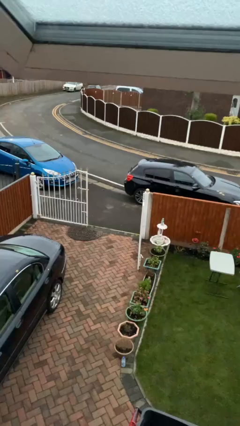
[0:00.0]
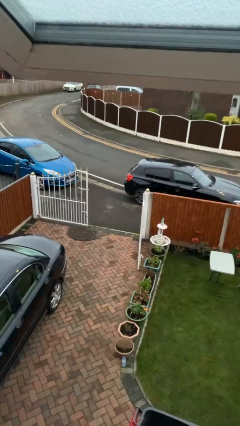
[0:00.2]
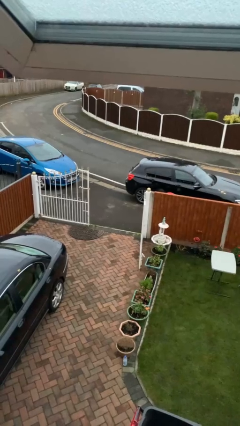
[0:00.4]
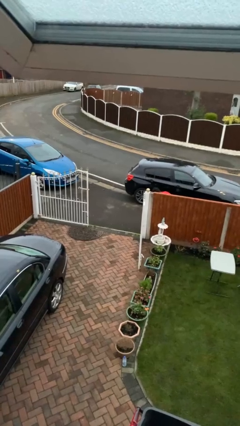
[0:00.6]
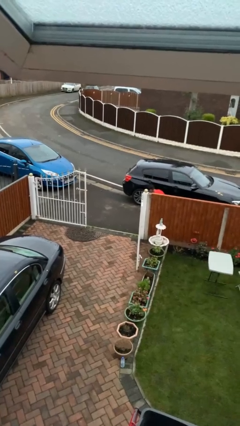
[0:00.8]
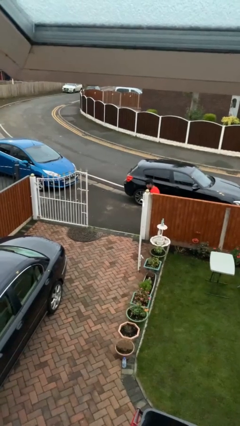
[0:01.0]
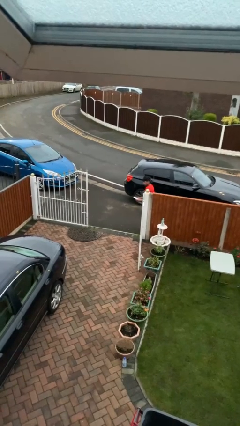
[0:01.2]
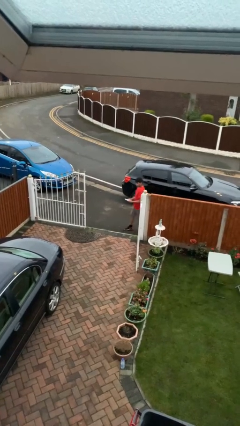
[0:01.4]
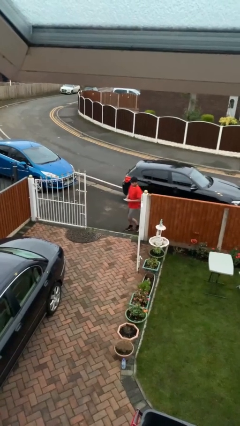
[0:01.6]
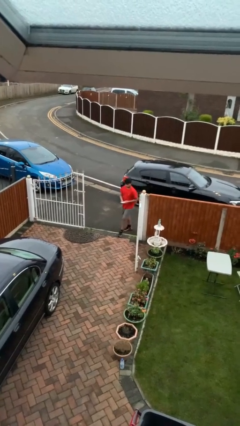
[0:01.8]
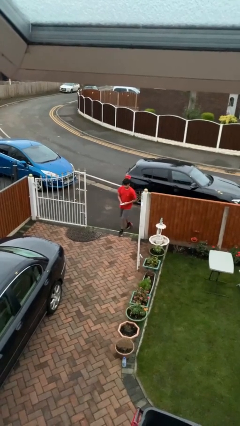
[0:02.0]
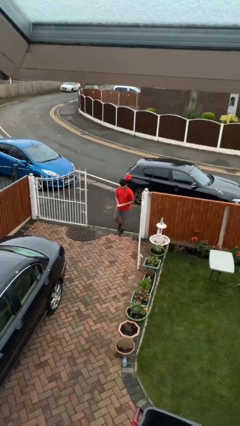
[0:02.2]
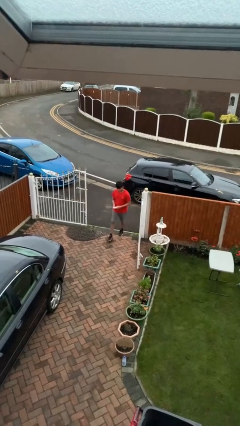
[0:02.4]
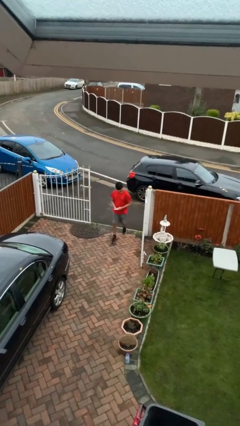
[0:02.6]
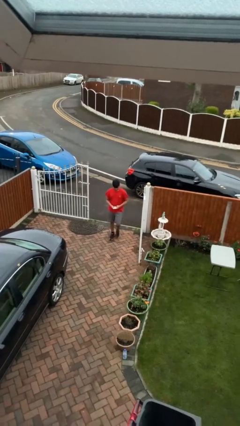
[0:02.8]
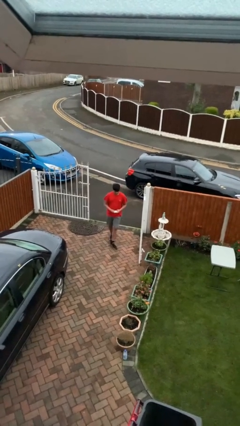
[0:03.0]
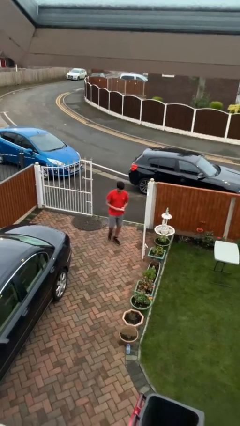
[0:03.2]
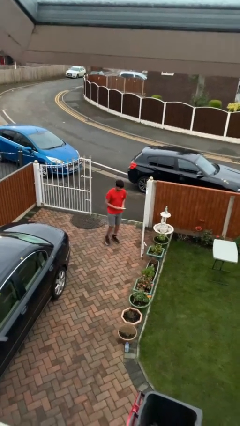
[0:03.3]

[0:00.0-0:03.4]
person enters scene through structure

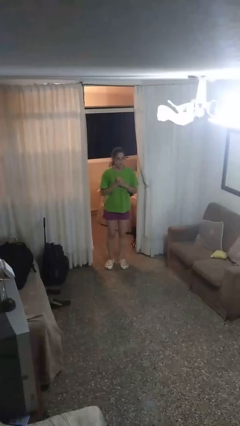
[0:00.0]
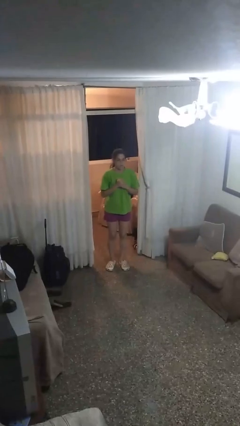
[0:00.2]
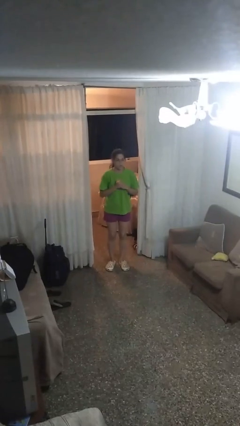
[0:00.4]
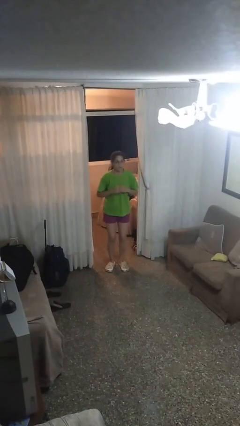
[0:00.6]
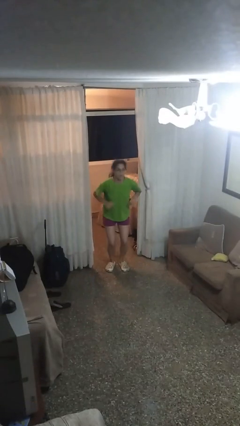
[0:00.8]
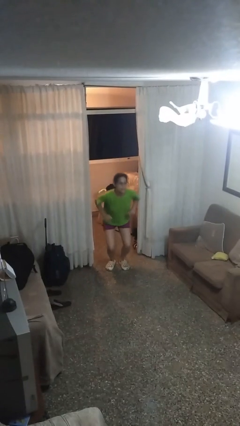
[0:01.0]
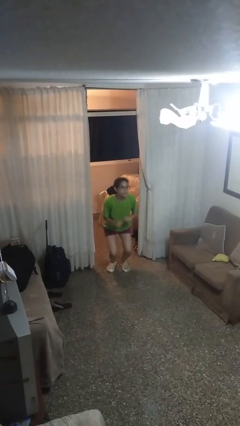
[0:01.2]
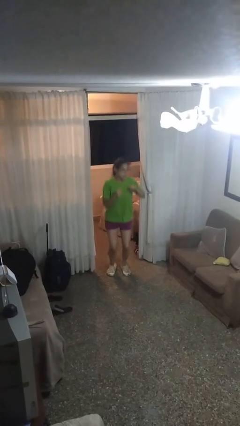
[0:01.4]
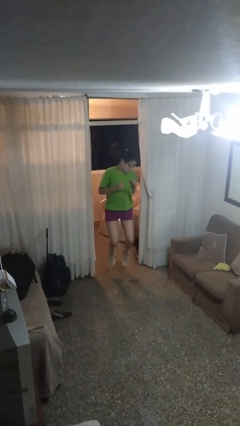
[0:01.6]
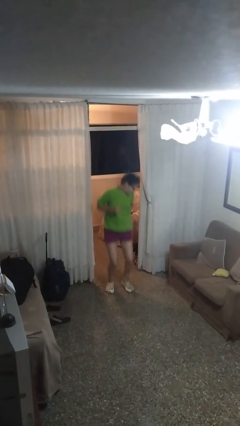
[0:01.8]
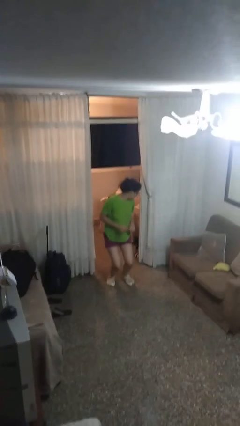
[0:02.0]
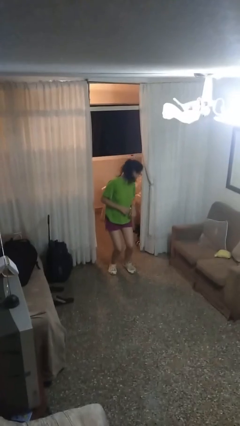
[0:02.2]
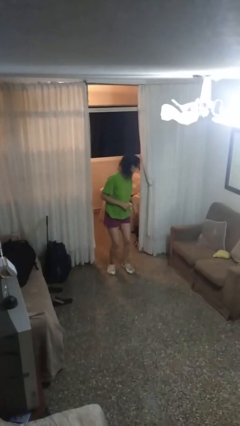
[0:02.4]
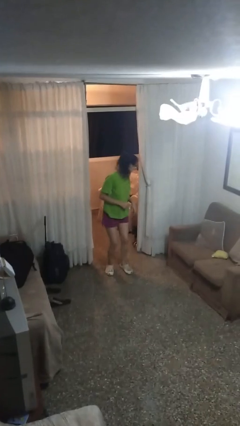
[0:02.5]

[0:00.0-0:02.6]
person jumps

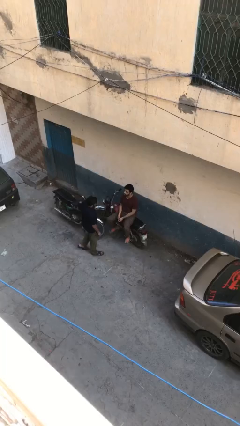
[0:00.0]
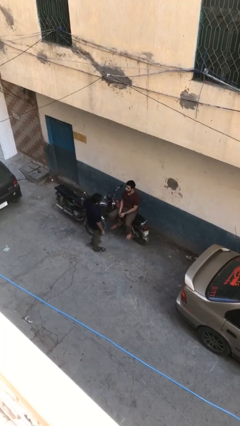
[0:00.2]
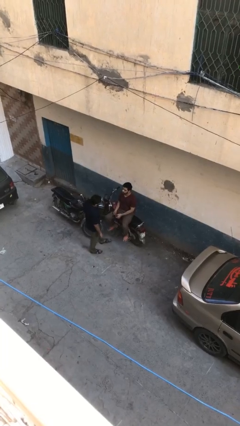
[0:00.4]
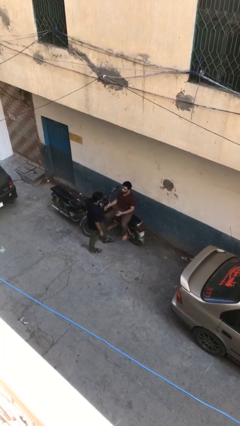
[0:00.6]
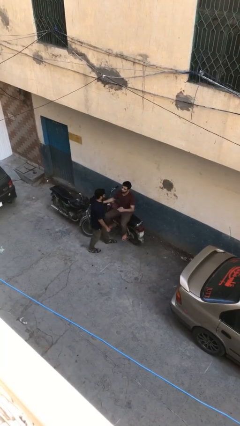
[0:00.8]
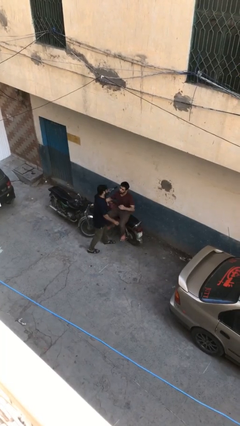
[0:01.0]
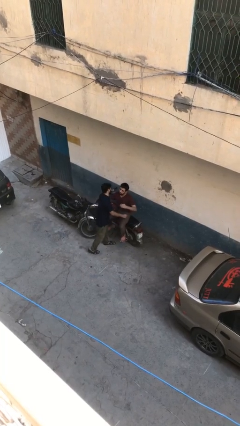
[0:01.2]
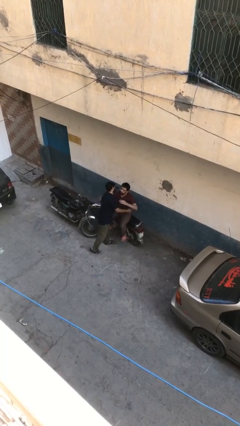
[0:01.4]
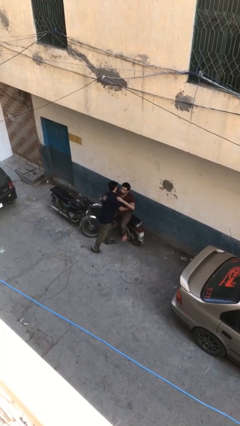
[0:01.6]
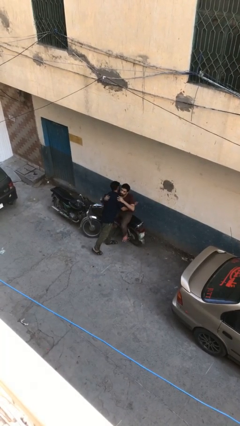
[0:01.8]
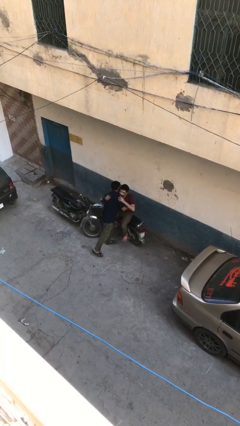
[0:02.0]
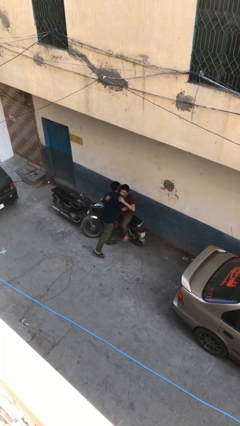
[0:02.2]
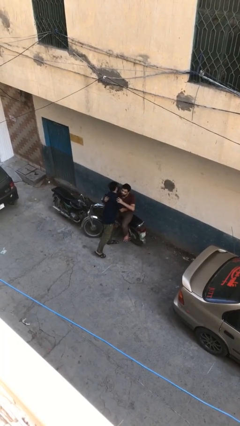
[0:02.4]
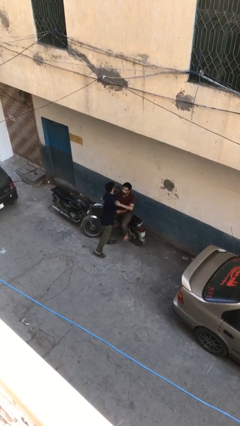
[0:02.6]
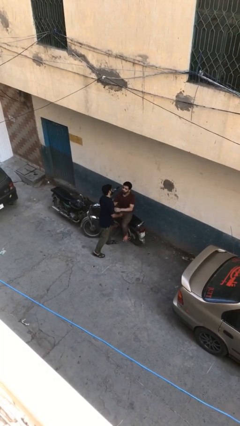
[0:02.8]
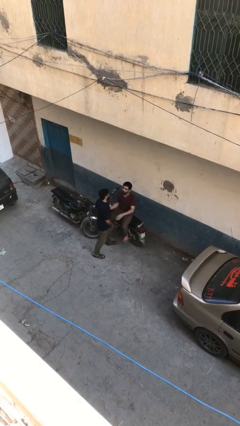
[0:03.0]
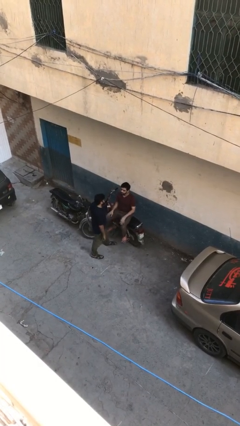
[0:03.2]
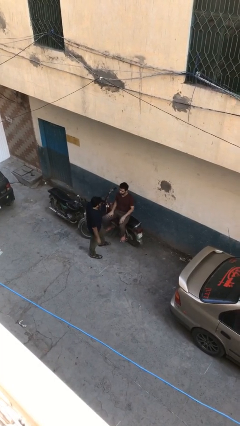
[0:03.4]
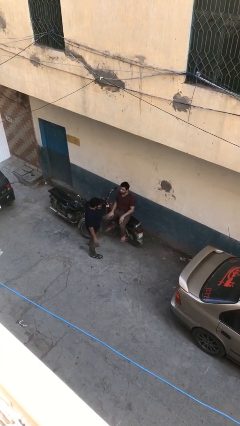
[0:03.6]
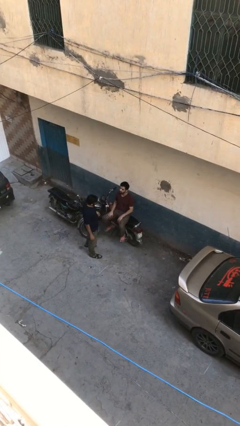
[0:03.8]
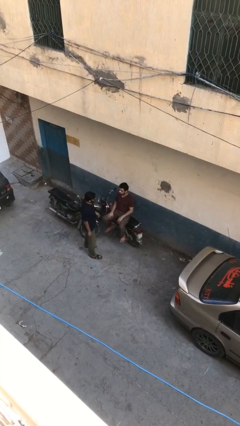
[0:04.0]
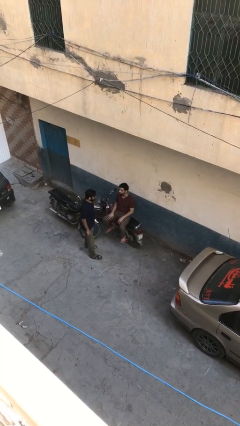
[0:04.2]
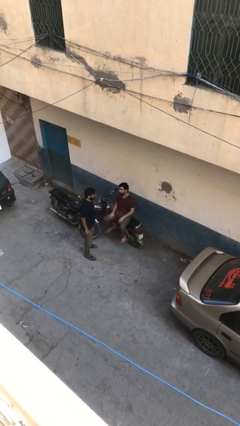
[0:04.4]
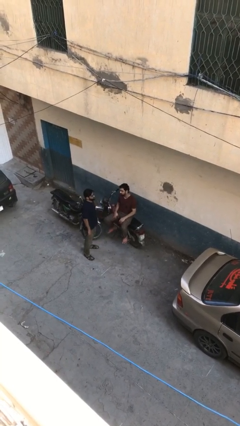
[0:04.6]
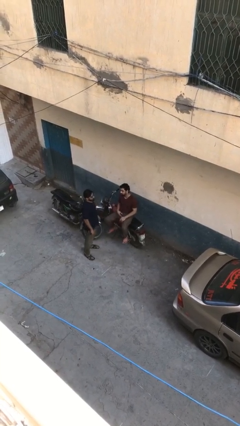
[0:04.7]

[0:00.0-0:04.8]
person embraces person

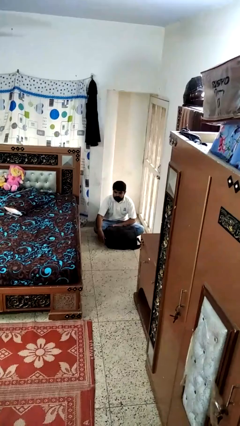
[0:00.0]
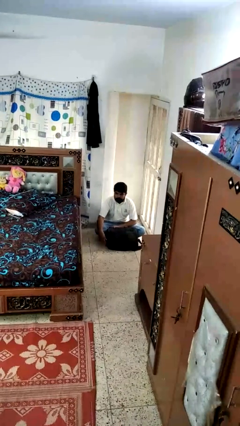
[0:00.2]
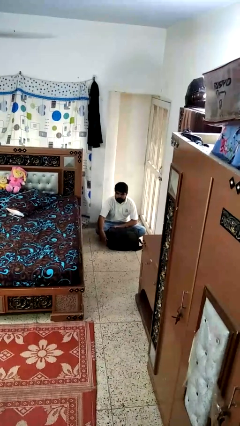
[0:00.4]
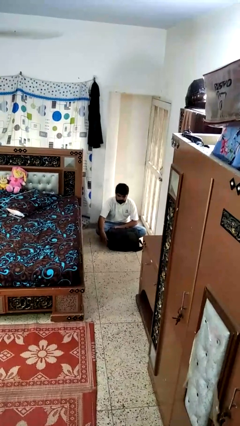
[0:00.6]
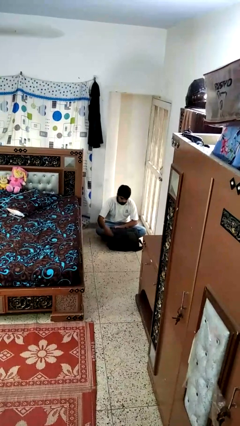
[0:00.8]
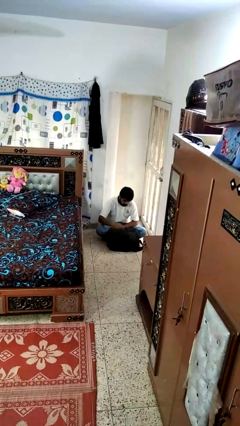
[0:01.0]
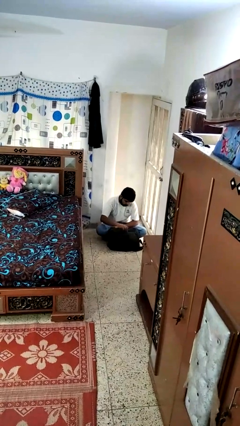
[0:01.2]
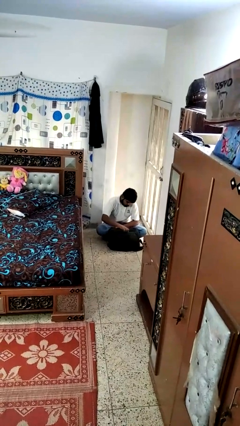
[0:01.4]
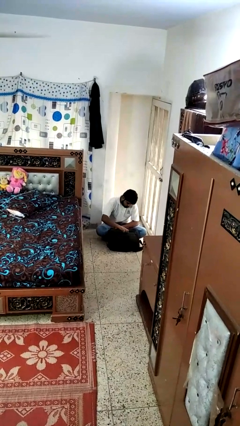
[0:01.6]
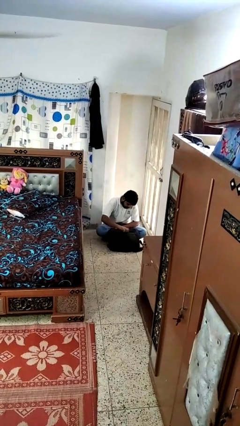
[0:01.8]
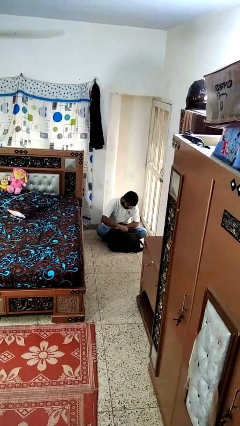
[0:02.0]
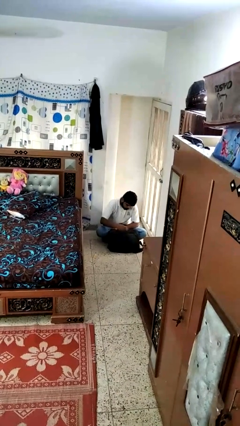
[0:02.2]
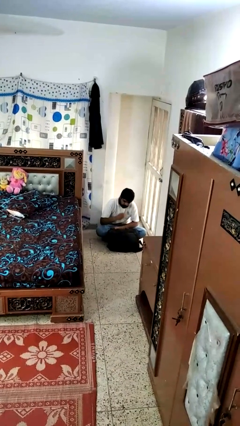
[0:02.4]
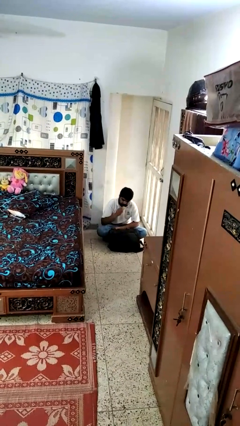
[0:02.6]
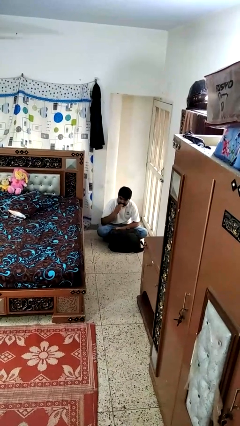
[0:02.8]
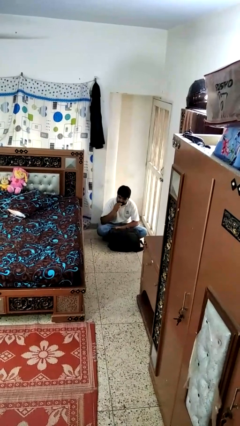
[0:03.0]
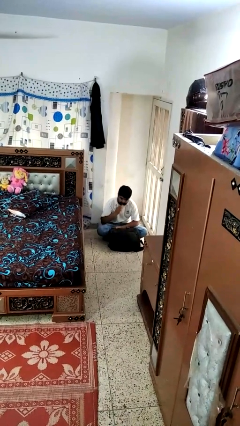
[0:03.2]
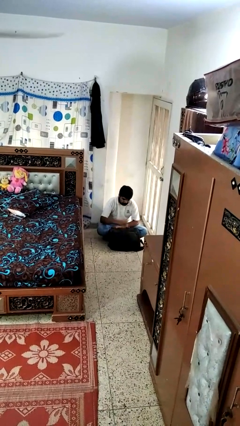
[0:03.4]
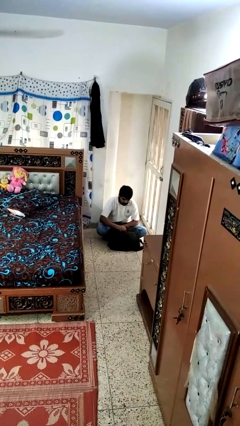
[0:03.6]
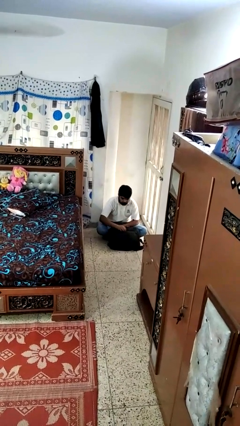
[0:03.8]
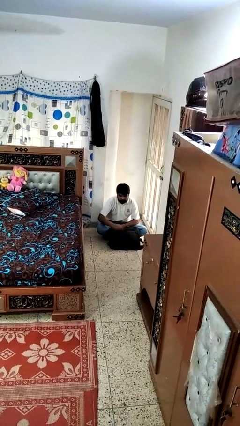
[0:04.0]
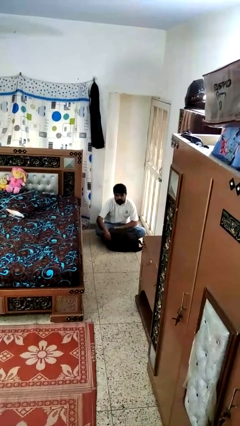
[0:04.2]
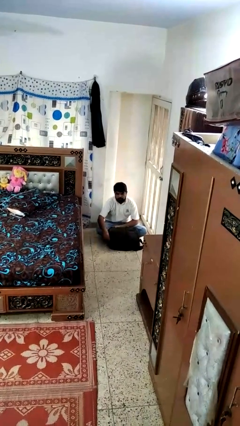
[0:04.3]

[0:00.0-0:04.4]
person eats snack from bag

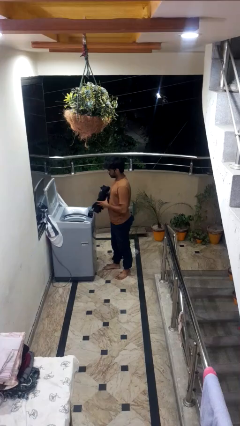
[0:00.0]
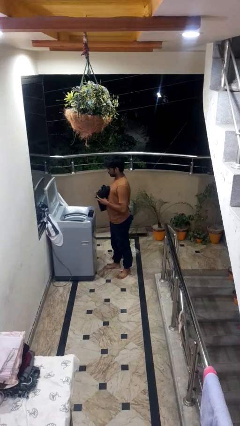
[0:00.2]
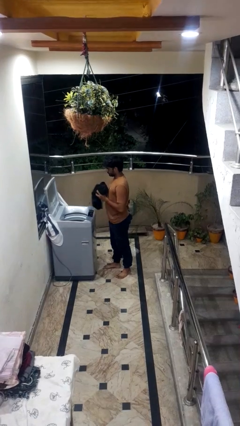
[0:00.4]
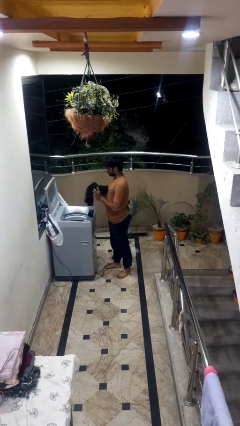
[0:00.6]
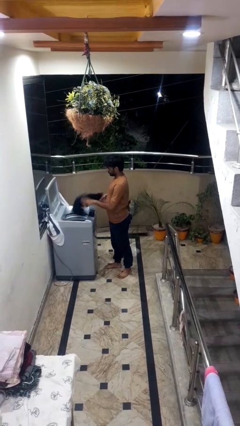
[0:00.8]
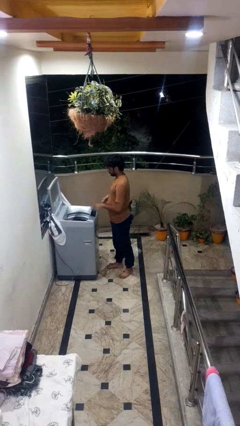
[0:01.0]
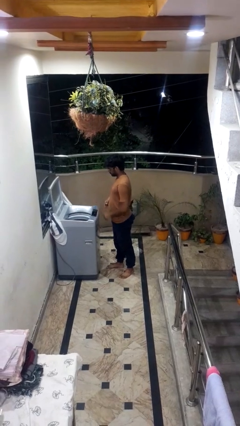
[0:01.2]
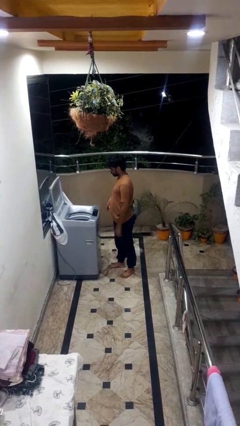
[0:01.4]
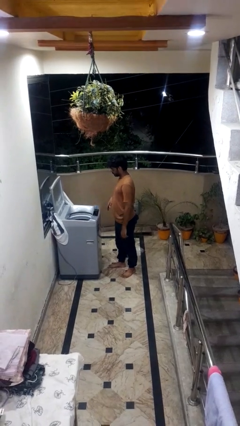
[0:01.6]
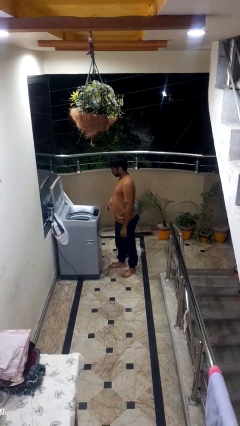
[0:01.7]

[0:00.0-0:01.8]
person loads clotheswasher

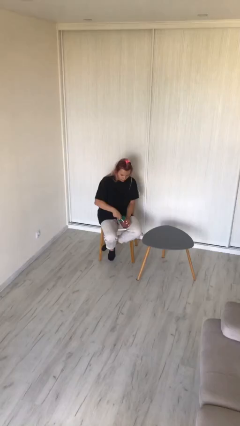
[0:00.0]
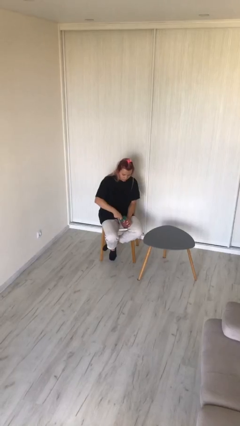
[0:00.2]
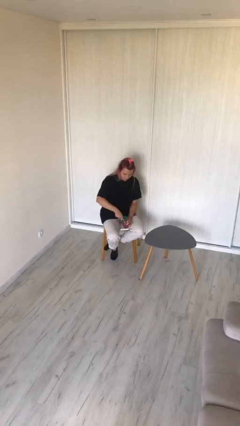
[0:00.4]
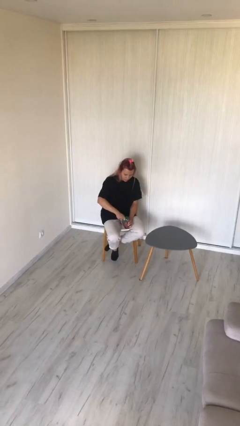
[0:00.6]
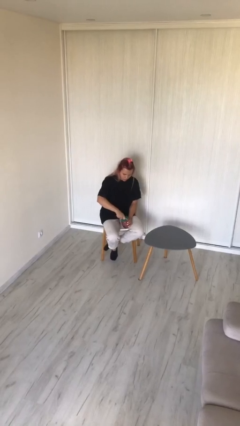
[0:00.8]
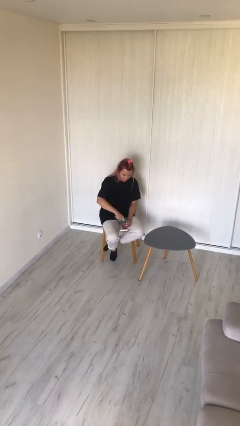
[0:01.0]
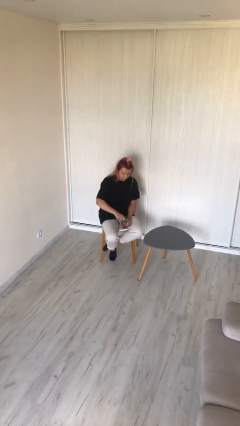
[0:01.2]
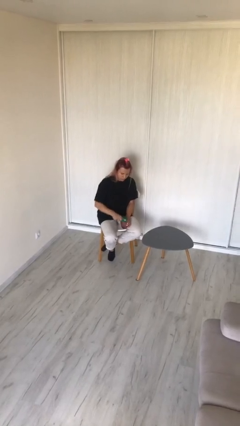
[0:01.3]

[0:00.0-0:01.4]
person opens can with can opener
